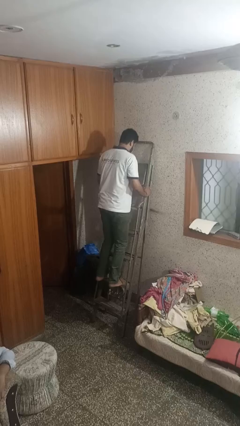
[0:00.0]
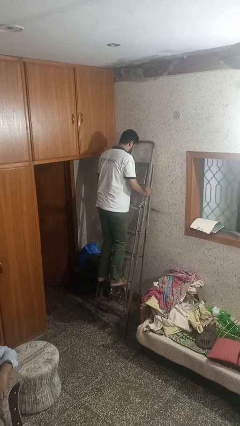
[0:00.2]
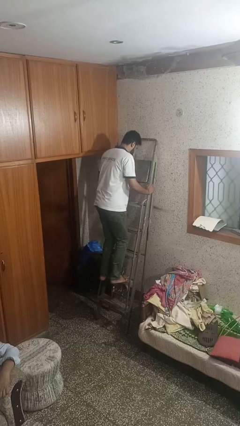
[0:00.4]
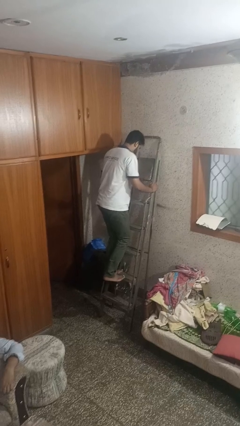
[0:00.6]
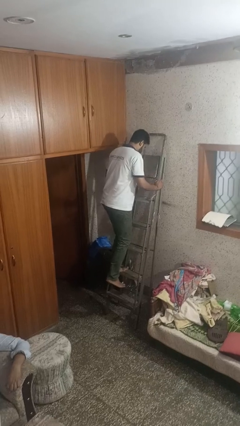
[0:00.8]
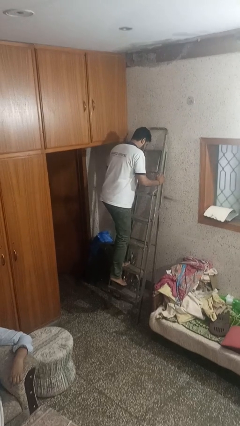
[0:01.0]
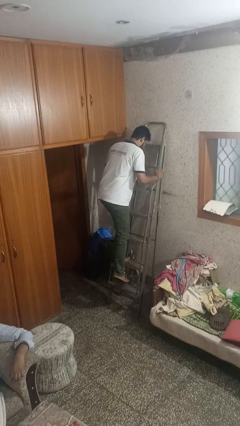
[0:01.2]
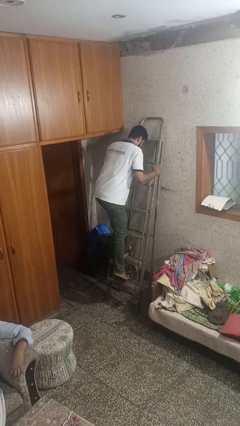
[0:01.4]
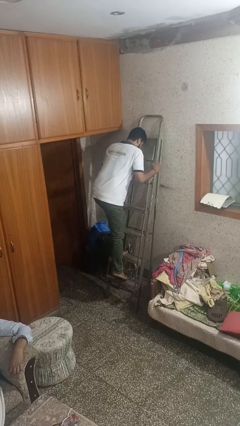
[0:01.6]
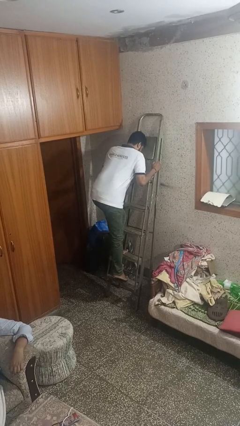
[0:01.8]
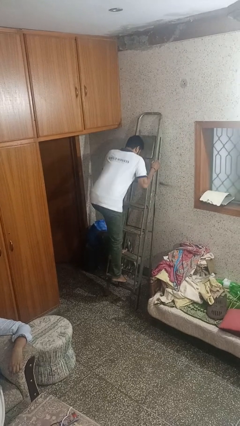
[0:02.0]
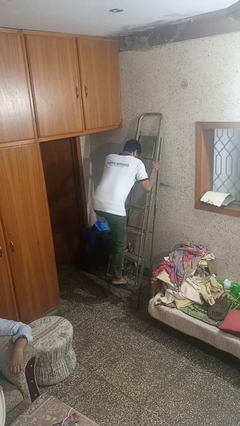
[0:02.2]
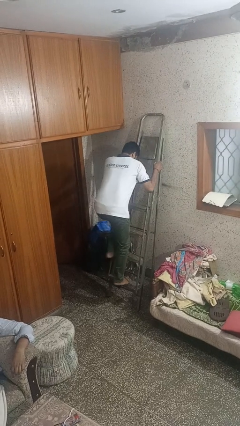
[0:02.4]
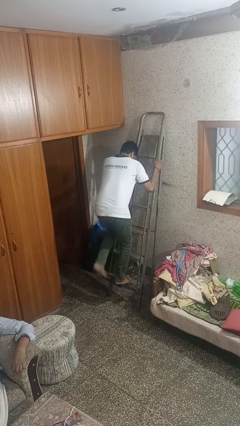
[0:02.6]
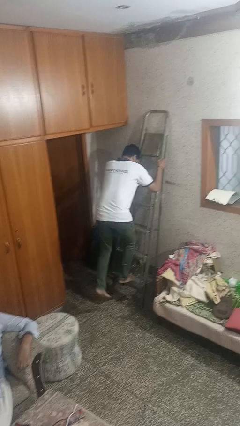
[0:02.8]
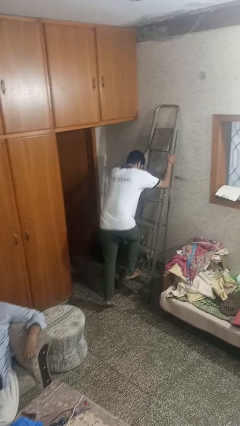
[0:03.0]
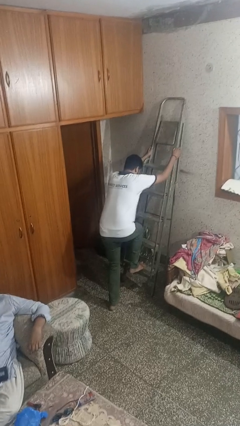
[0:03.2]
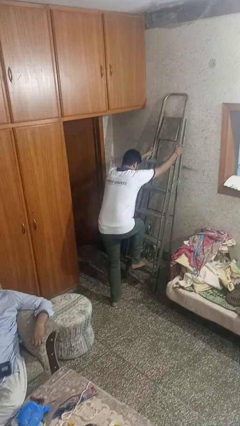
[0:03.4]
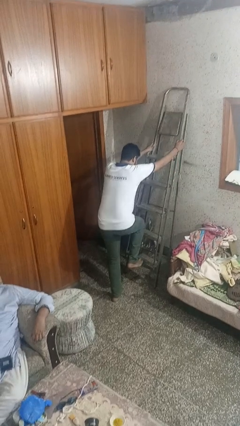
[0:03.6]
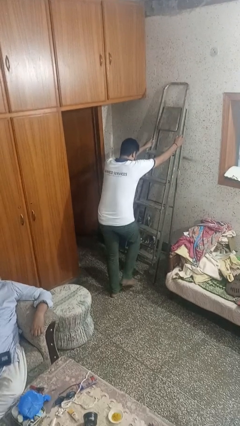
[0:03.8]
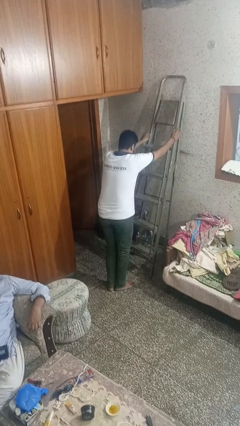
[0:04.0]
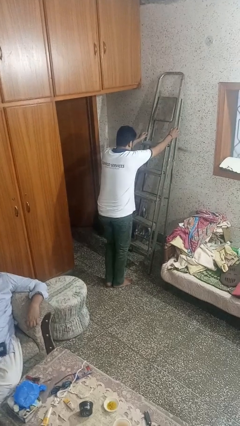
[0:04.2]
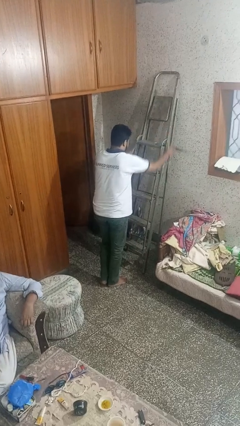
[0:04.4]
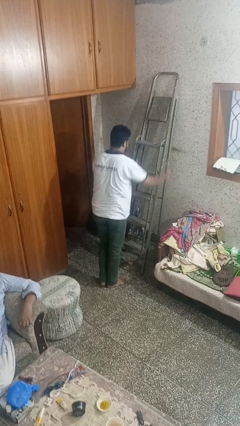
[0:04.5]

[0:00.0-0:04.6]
person climbs down ladder

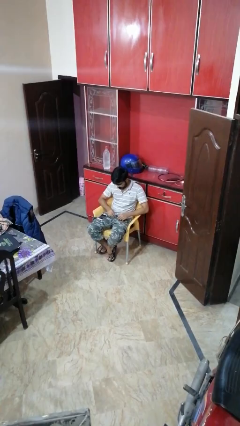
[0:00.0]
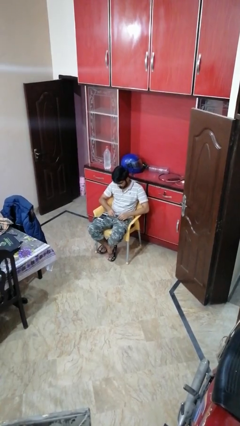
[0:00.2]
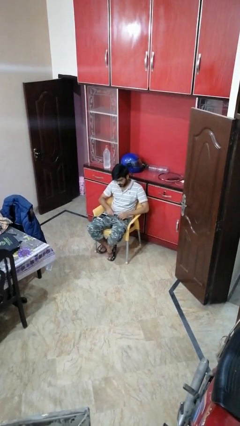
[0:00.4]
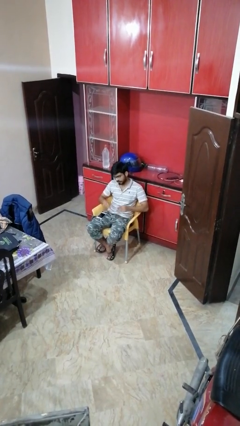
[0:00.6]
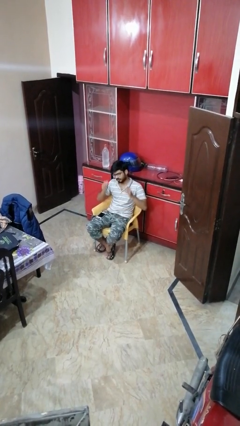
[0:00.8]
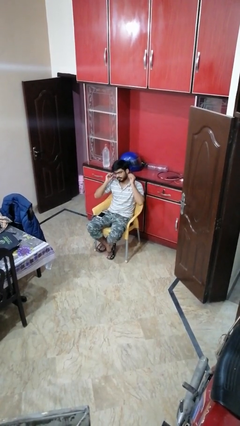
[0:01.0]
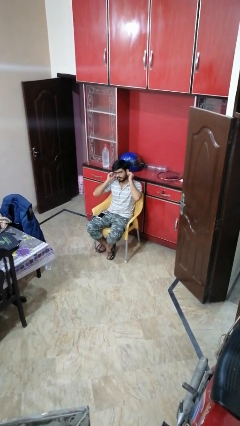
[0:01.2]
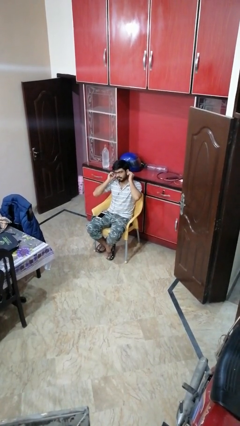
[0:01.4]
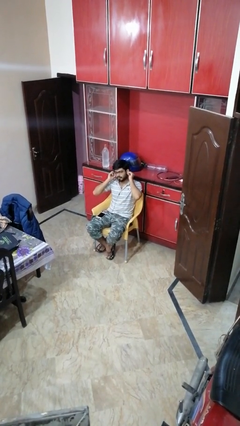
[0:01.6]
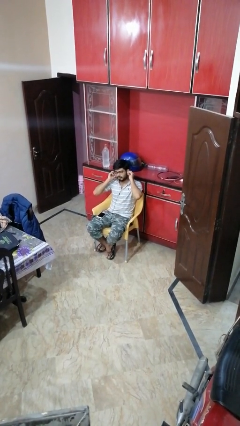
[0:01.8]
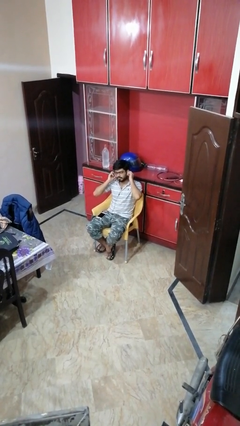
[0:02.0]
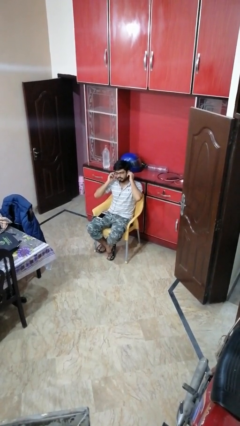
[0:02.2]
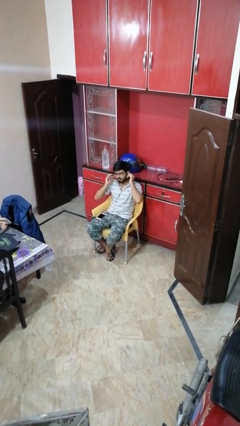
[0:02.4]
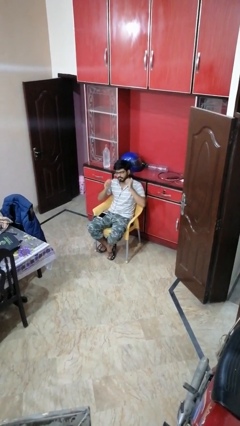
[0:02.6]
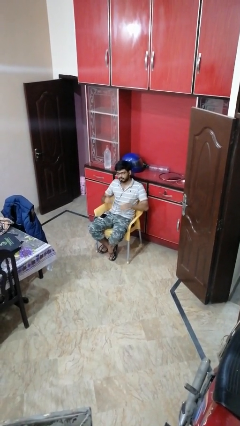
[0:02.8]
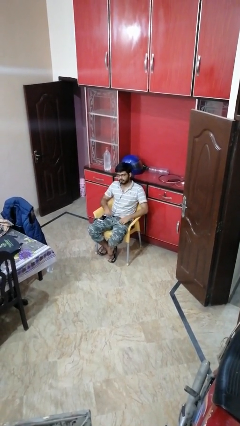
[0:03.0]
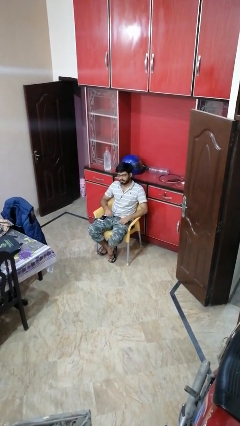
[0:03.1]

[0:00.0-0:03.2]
person puts on headphones

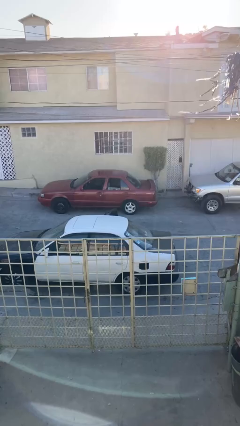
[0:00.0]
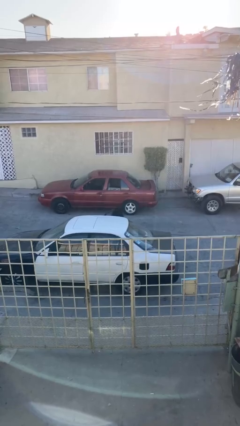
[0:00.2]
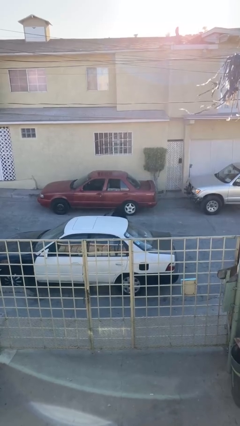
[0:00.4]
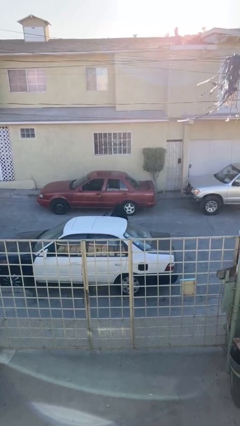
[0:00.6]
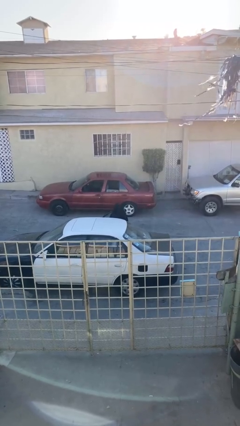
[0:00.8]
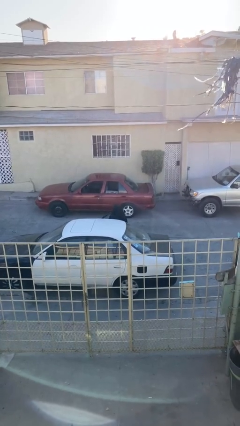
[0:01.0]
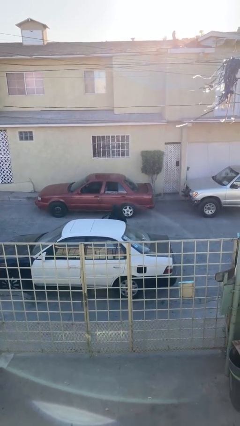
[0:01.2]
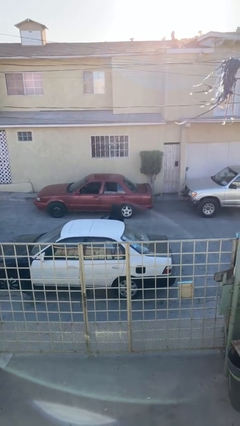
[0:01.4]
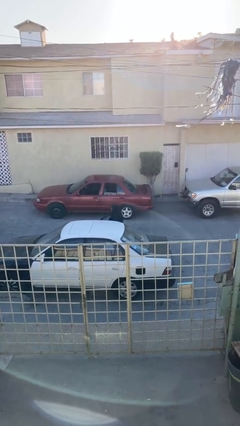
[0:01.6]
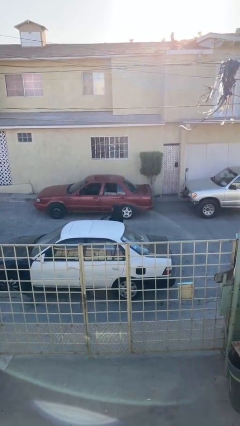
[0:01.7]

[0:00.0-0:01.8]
person exits car

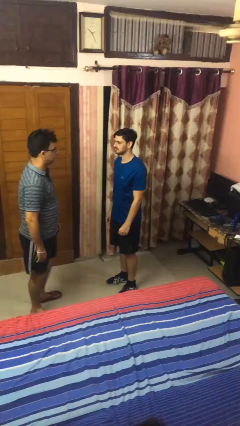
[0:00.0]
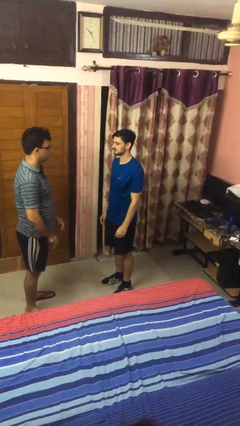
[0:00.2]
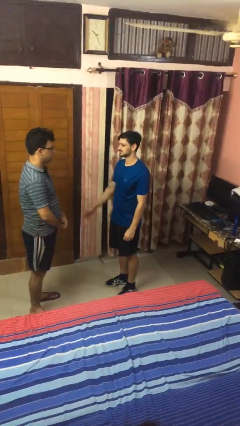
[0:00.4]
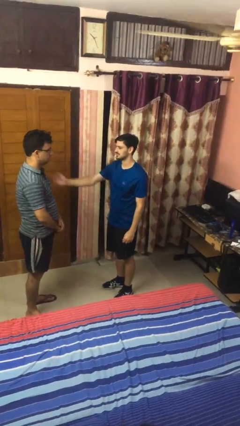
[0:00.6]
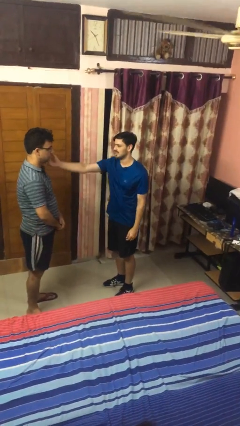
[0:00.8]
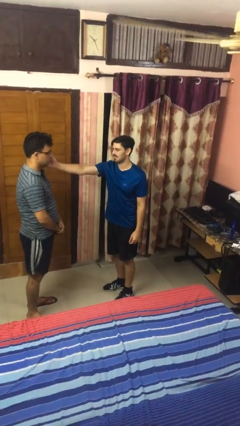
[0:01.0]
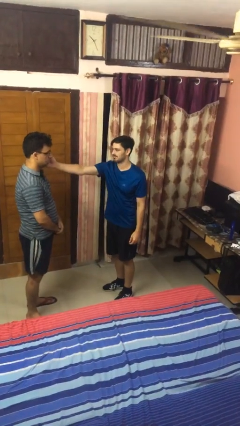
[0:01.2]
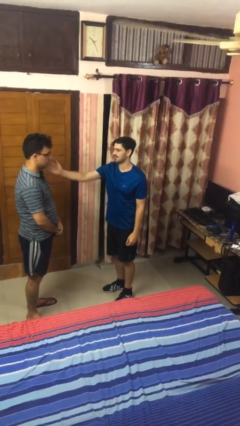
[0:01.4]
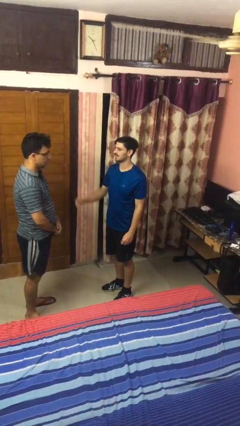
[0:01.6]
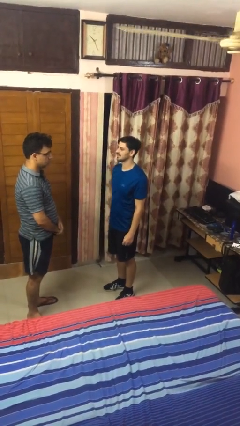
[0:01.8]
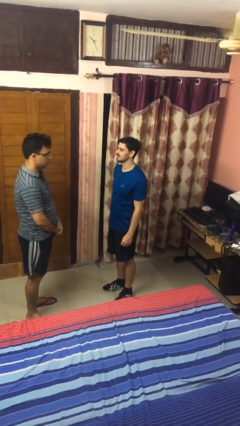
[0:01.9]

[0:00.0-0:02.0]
person touches face of person

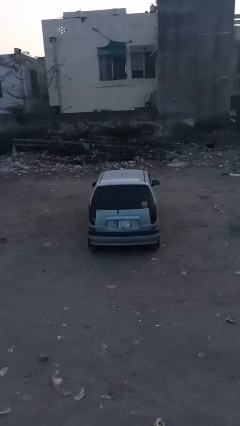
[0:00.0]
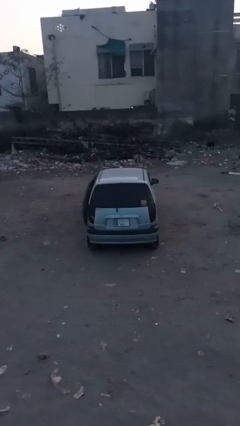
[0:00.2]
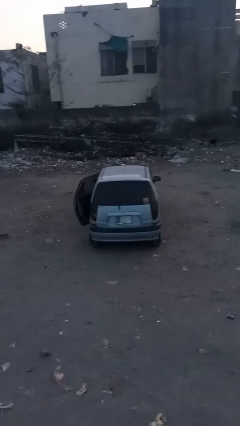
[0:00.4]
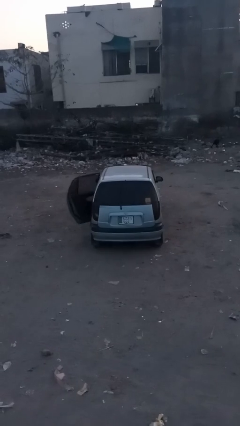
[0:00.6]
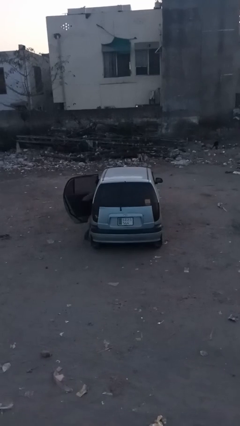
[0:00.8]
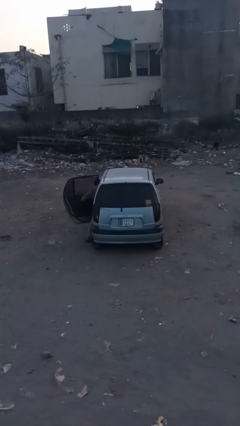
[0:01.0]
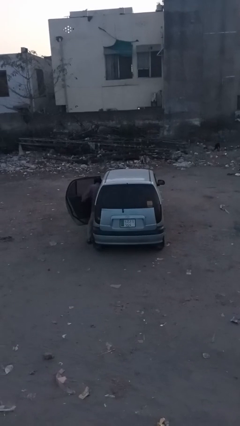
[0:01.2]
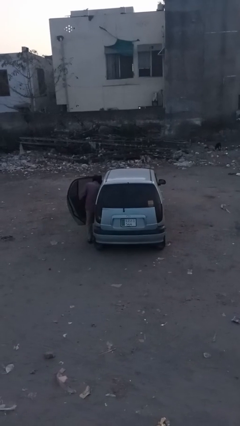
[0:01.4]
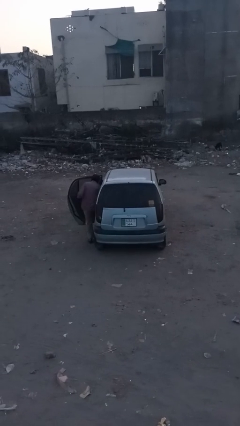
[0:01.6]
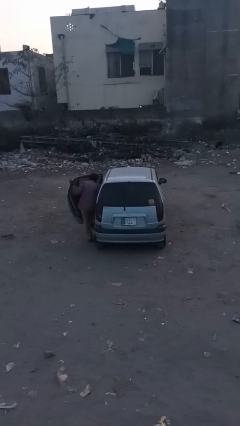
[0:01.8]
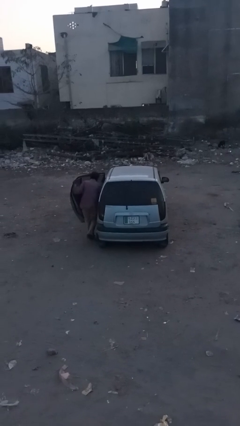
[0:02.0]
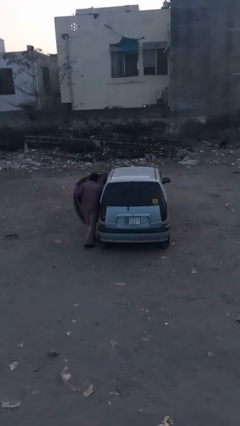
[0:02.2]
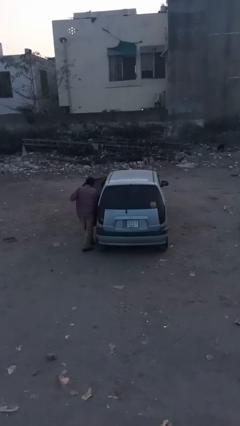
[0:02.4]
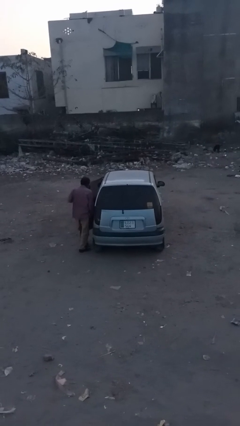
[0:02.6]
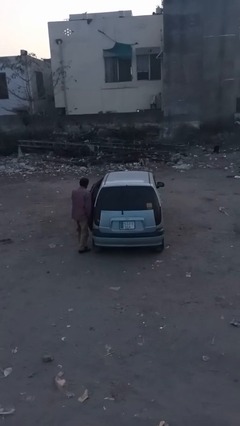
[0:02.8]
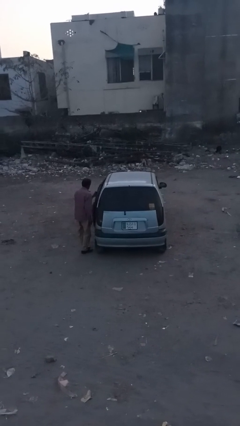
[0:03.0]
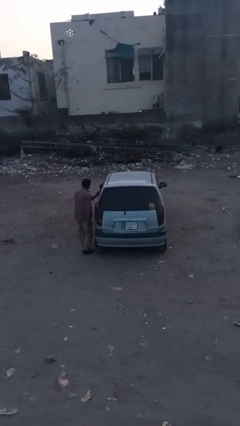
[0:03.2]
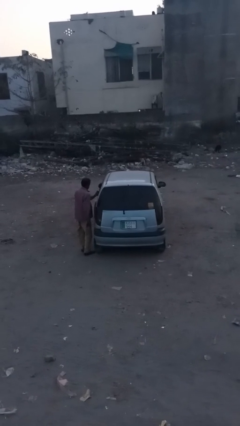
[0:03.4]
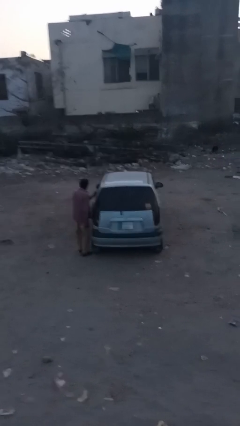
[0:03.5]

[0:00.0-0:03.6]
car drops off person

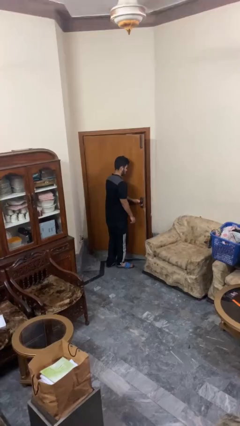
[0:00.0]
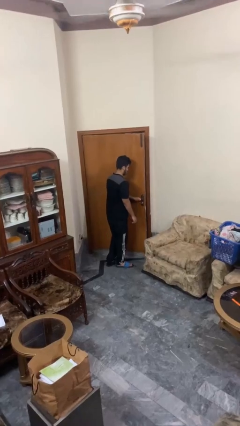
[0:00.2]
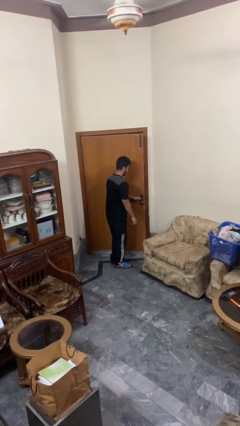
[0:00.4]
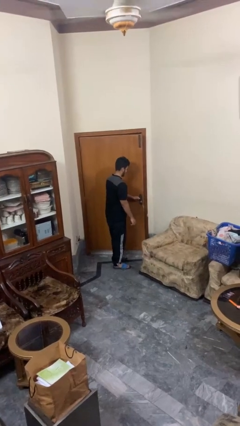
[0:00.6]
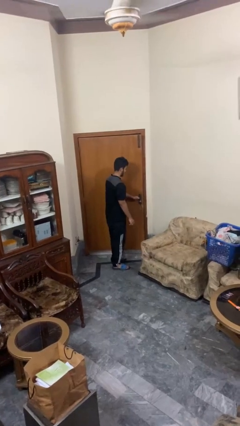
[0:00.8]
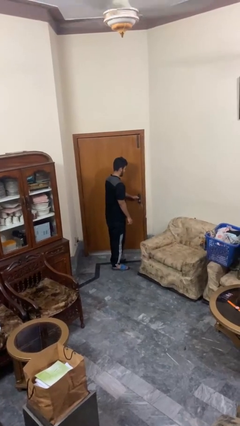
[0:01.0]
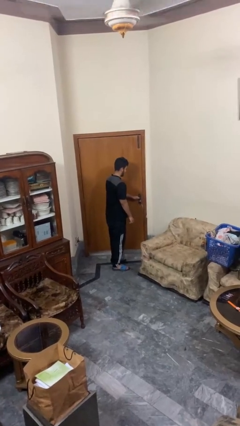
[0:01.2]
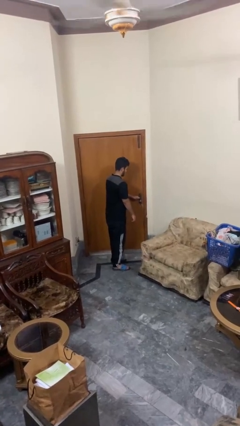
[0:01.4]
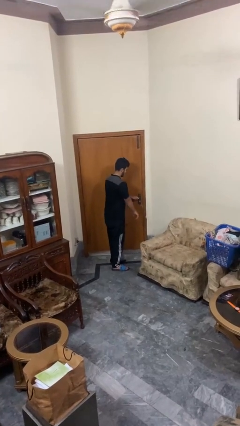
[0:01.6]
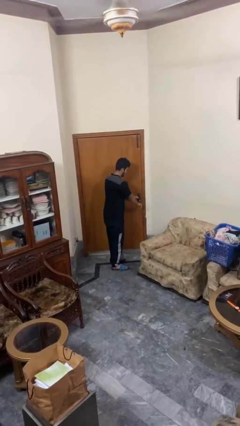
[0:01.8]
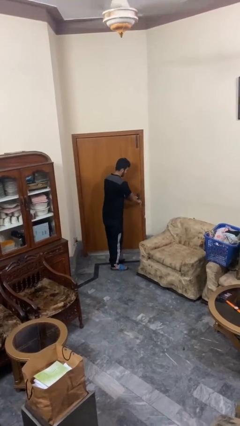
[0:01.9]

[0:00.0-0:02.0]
person closes facility door

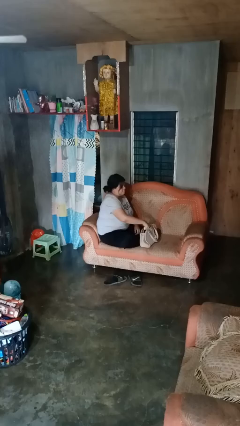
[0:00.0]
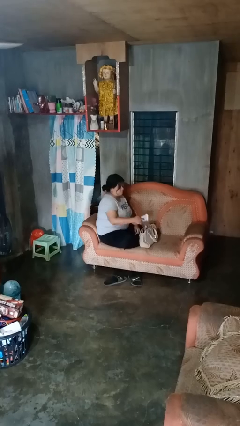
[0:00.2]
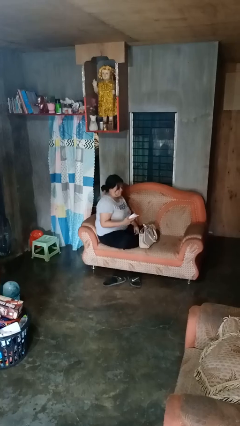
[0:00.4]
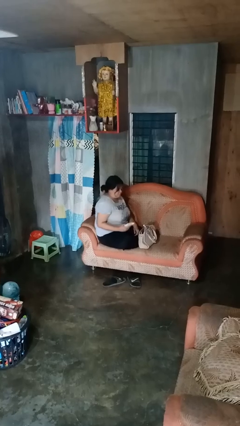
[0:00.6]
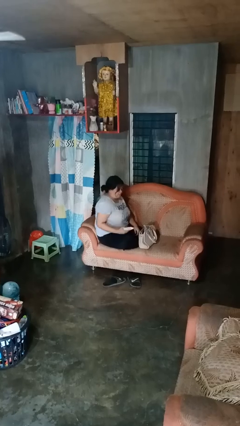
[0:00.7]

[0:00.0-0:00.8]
person takes object from purse
